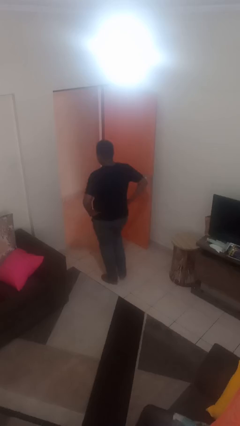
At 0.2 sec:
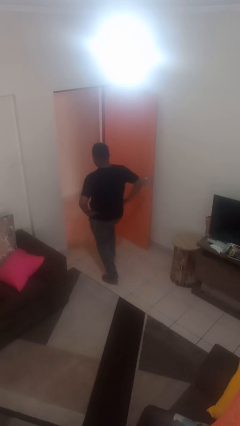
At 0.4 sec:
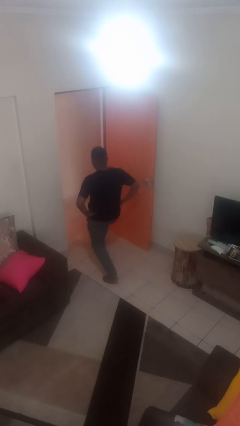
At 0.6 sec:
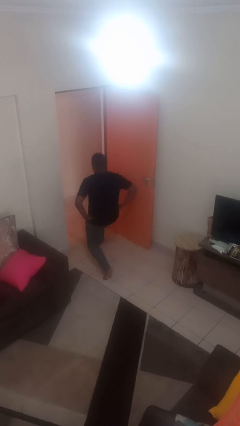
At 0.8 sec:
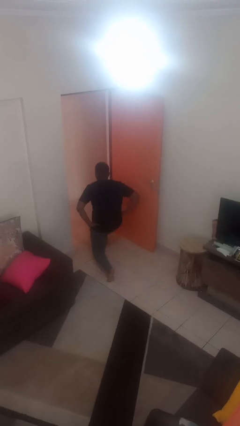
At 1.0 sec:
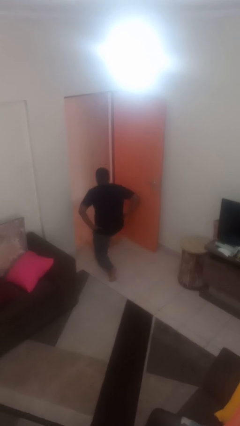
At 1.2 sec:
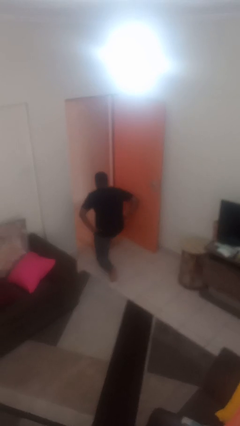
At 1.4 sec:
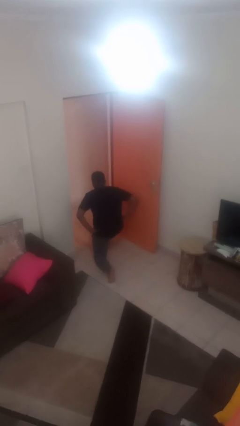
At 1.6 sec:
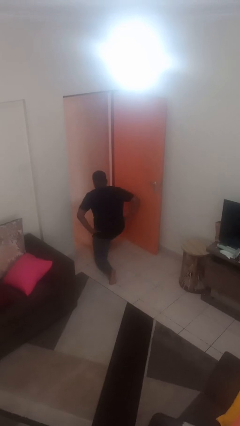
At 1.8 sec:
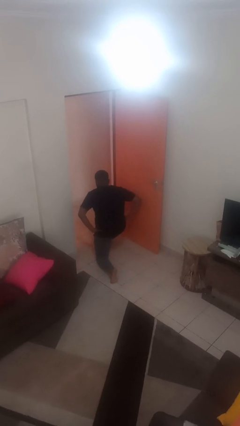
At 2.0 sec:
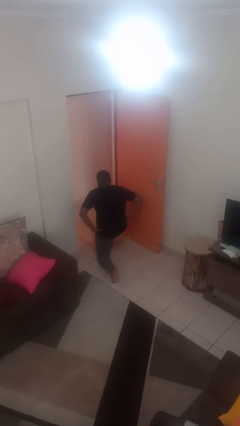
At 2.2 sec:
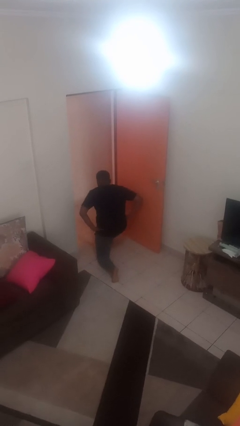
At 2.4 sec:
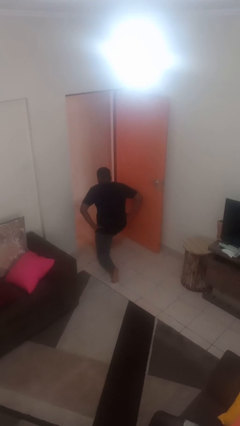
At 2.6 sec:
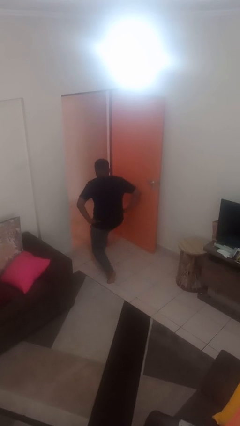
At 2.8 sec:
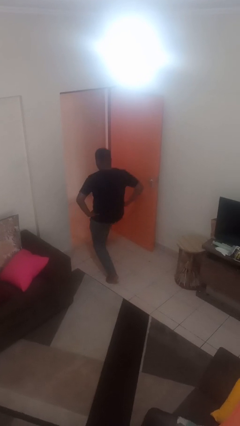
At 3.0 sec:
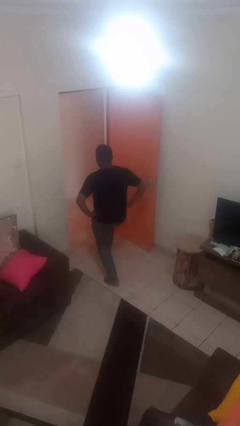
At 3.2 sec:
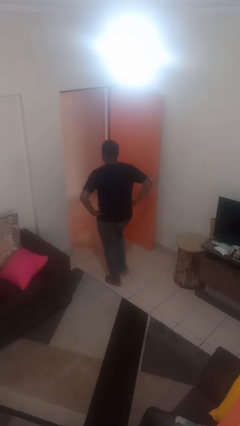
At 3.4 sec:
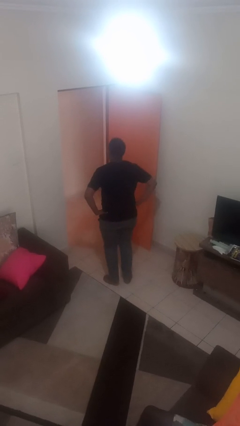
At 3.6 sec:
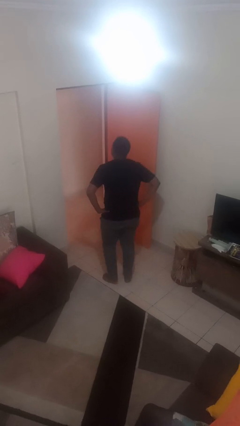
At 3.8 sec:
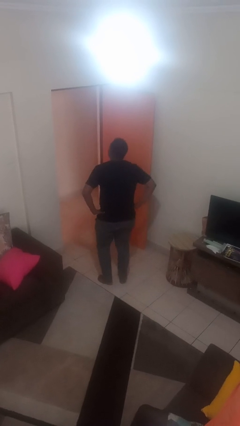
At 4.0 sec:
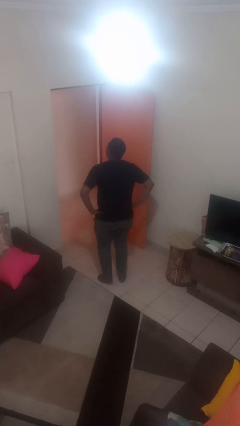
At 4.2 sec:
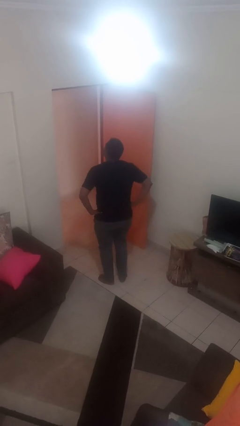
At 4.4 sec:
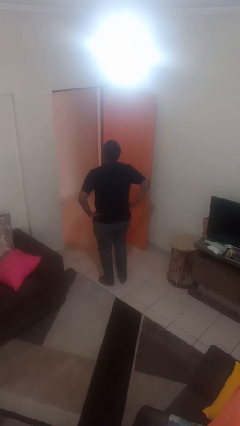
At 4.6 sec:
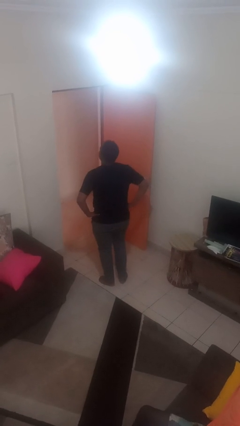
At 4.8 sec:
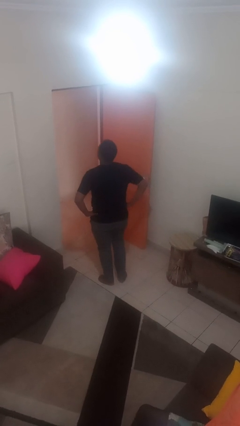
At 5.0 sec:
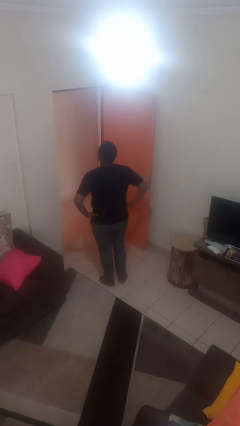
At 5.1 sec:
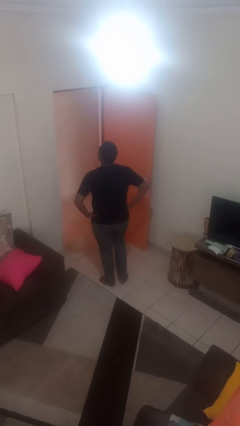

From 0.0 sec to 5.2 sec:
person exercises with lunges

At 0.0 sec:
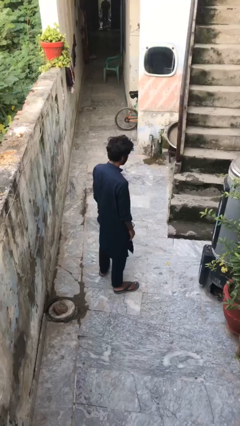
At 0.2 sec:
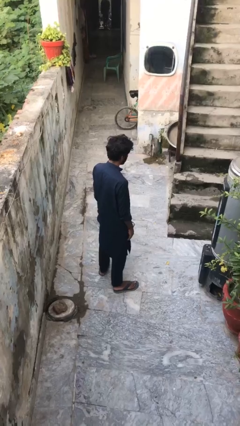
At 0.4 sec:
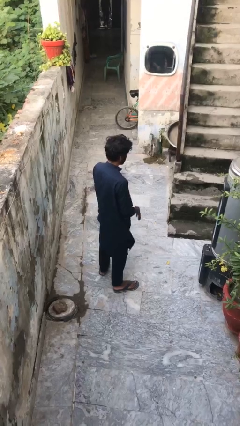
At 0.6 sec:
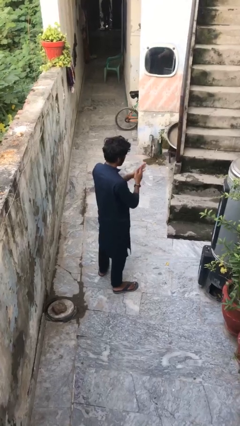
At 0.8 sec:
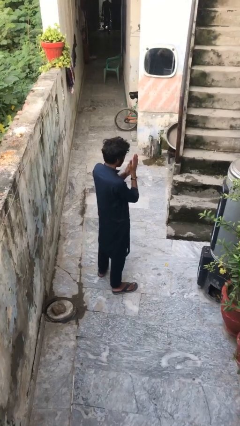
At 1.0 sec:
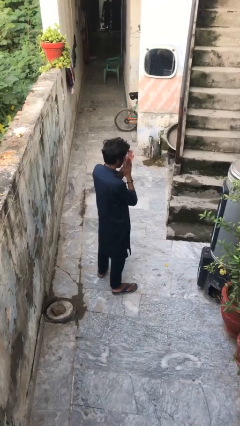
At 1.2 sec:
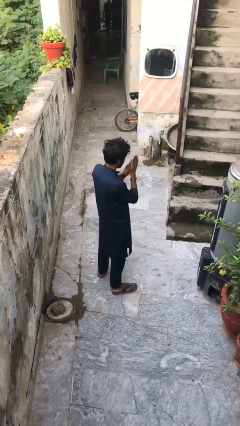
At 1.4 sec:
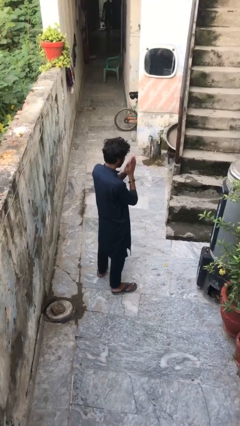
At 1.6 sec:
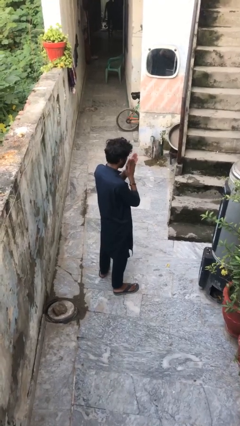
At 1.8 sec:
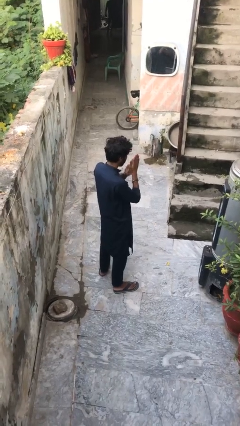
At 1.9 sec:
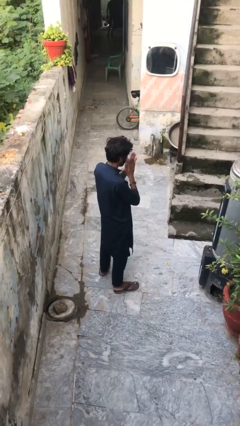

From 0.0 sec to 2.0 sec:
person blows into hands

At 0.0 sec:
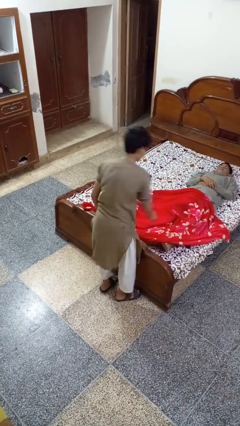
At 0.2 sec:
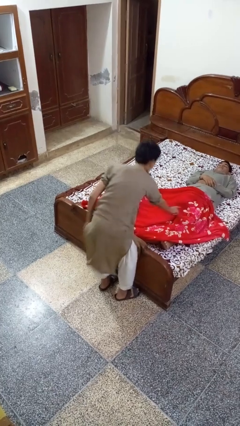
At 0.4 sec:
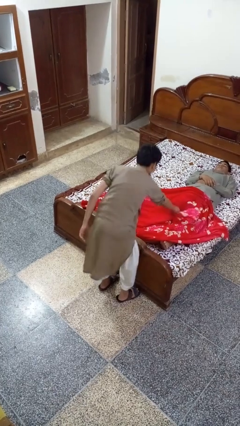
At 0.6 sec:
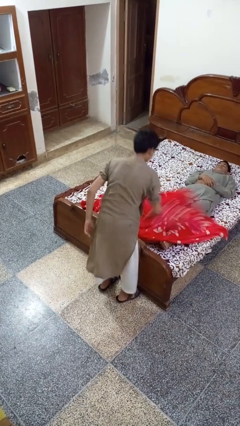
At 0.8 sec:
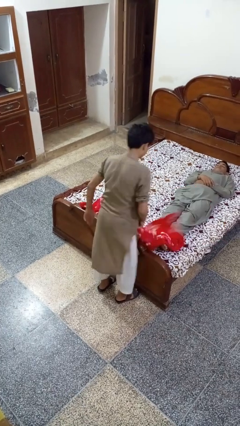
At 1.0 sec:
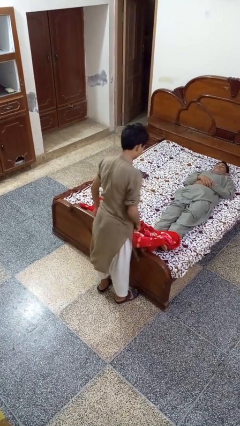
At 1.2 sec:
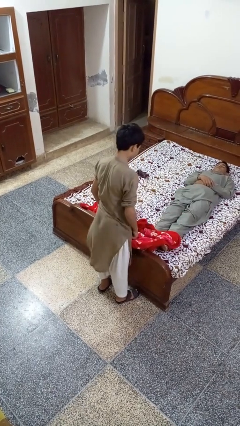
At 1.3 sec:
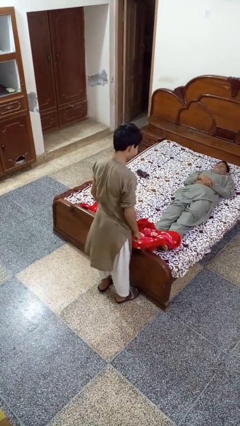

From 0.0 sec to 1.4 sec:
person uncovers friend with blanket

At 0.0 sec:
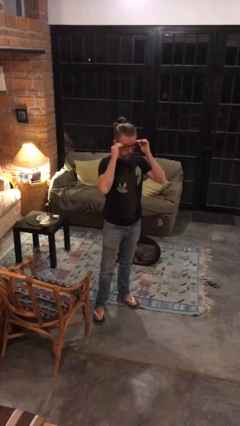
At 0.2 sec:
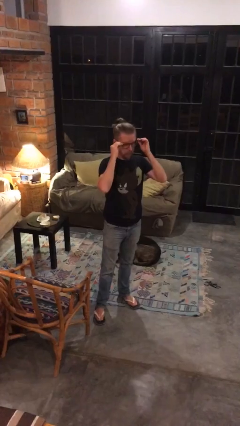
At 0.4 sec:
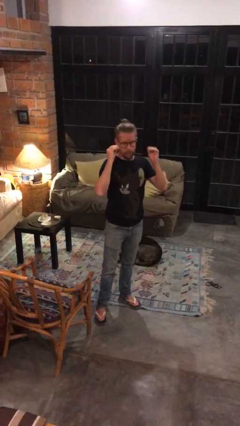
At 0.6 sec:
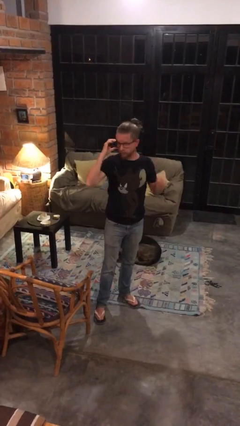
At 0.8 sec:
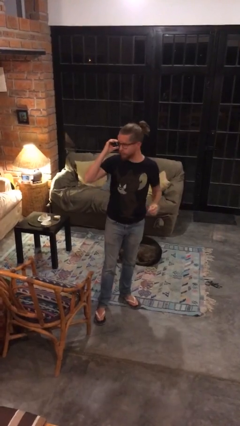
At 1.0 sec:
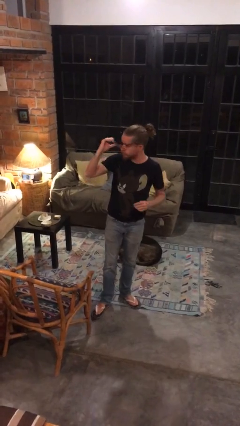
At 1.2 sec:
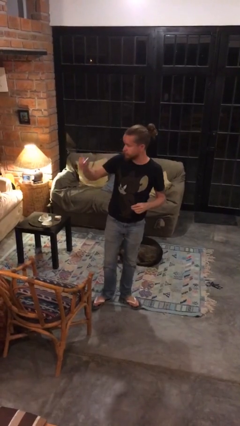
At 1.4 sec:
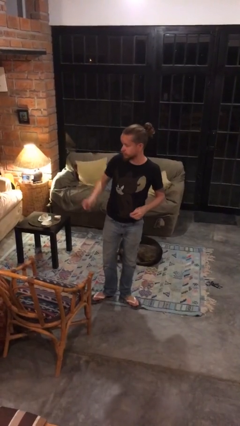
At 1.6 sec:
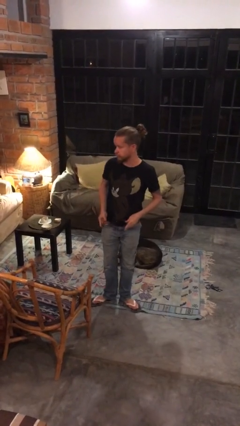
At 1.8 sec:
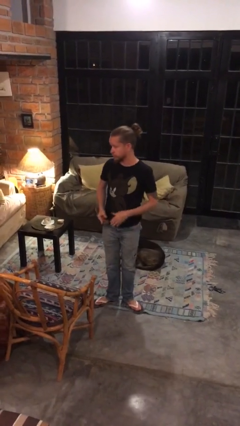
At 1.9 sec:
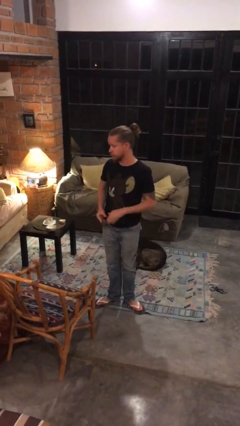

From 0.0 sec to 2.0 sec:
person takes off glasses

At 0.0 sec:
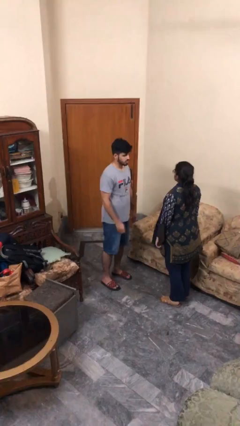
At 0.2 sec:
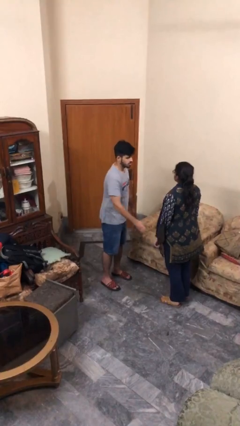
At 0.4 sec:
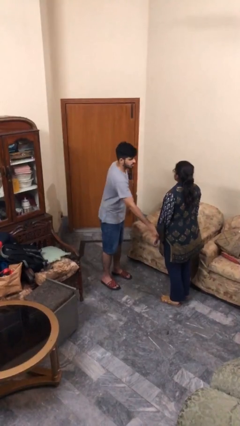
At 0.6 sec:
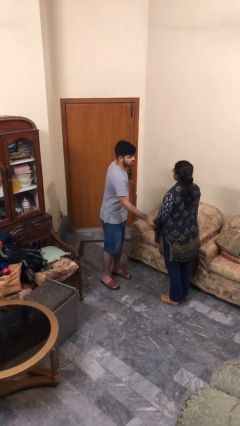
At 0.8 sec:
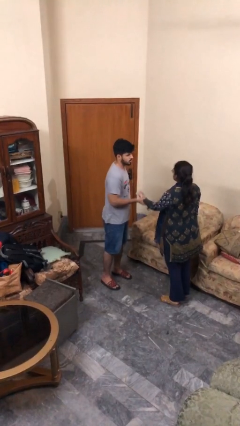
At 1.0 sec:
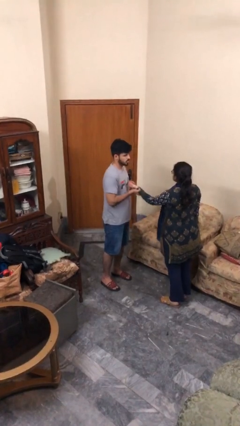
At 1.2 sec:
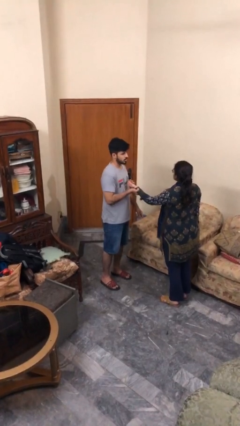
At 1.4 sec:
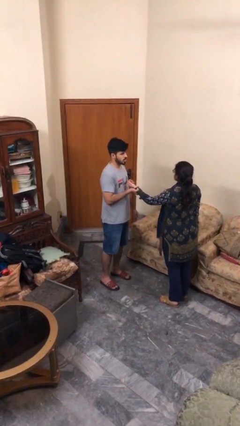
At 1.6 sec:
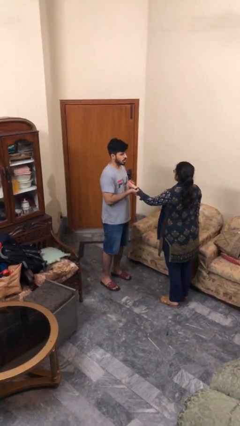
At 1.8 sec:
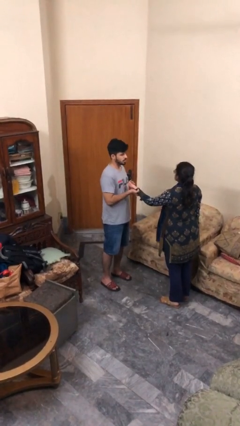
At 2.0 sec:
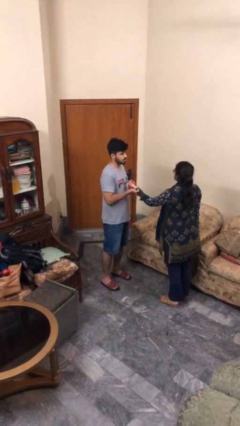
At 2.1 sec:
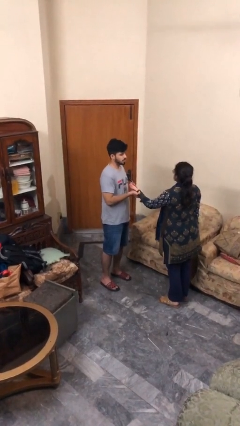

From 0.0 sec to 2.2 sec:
person grabs person by forearm

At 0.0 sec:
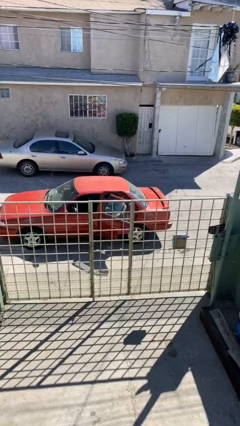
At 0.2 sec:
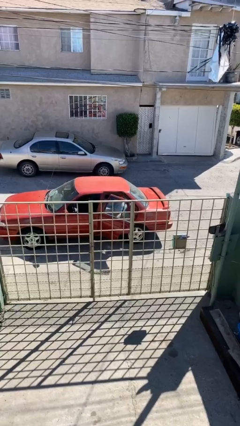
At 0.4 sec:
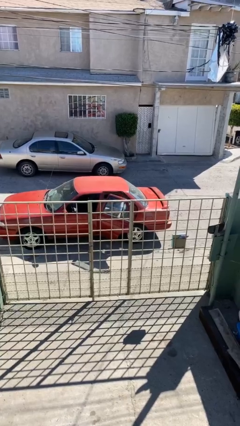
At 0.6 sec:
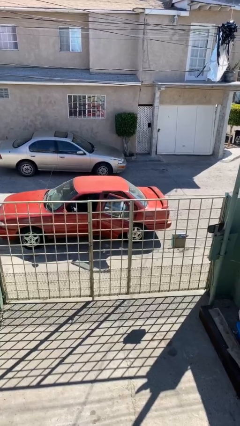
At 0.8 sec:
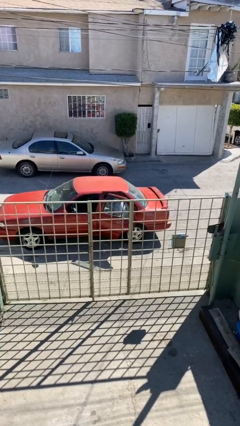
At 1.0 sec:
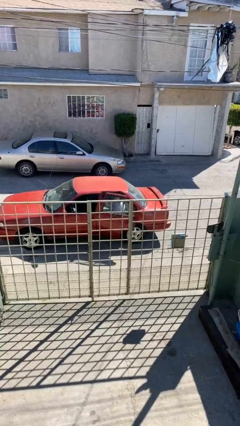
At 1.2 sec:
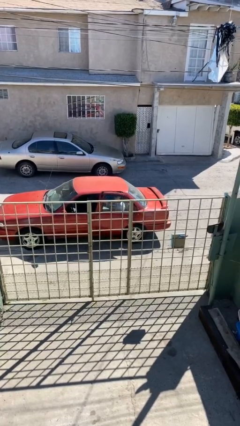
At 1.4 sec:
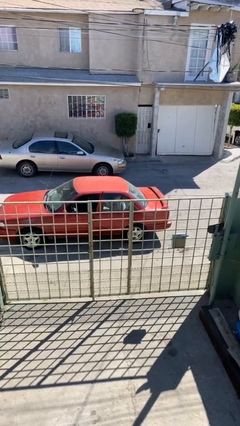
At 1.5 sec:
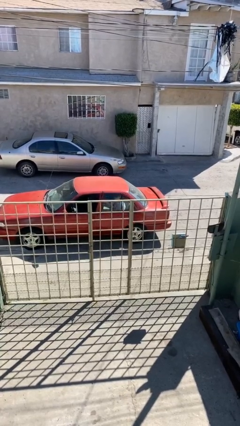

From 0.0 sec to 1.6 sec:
person closes car door

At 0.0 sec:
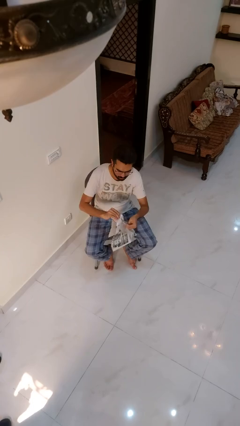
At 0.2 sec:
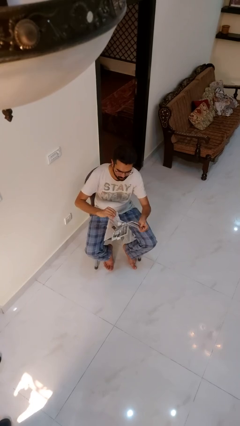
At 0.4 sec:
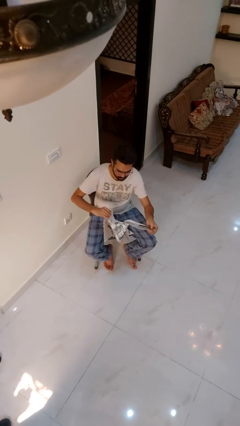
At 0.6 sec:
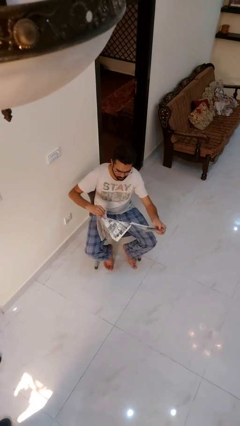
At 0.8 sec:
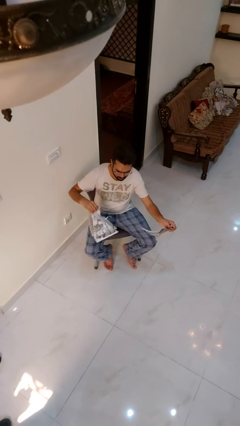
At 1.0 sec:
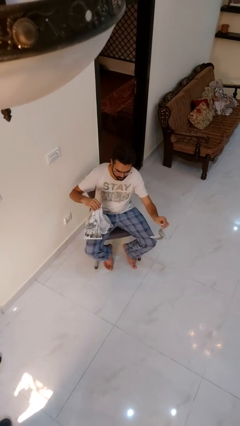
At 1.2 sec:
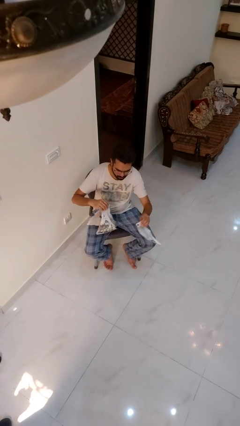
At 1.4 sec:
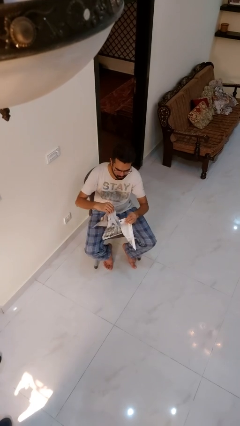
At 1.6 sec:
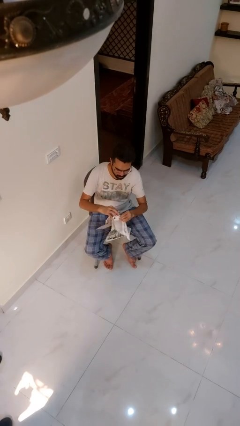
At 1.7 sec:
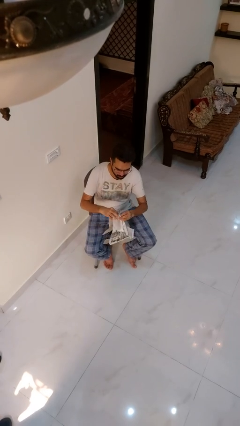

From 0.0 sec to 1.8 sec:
person tears paper

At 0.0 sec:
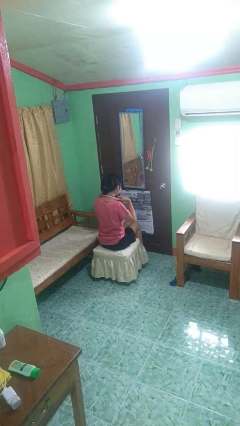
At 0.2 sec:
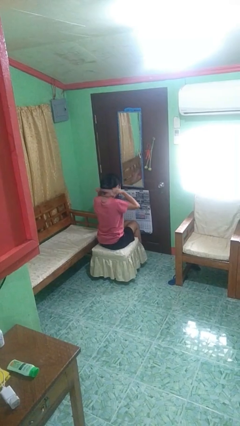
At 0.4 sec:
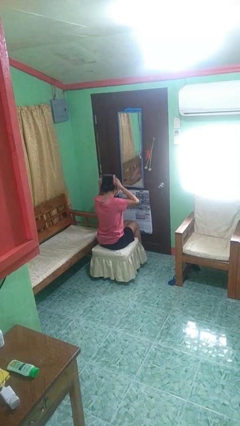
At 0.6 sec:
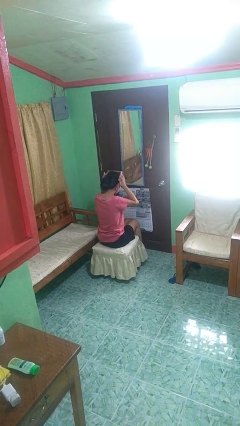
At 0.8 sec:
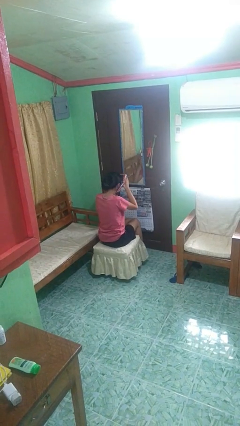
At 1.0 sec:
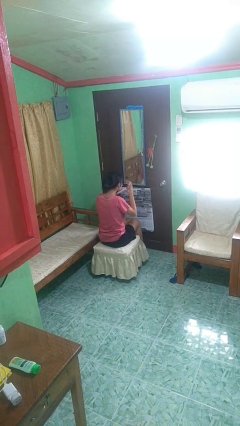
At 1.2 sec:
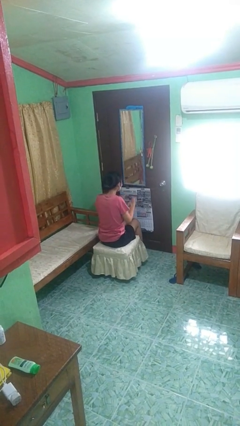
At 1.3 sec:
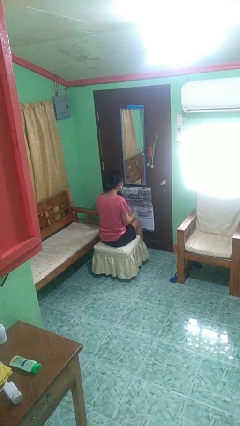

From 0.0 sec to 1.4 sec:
person takes off necklace
